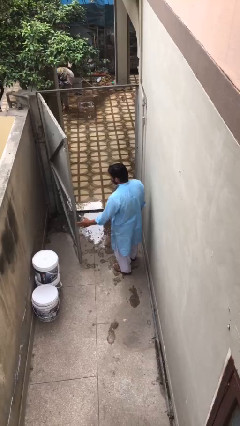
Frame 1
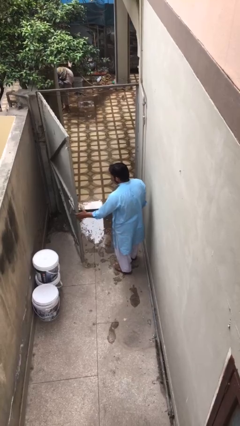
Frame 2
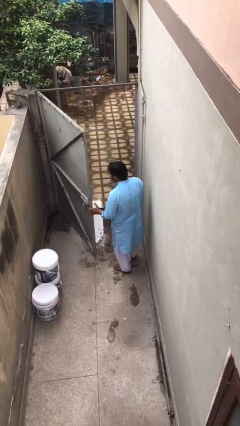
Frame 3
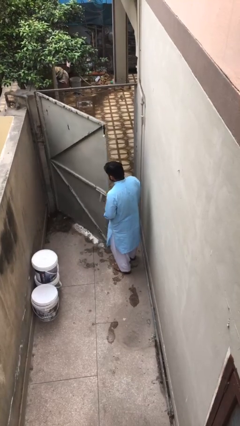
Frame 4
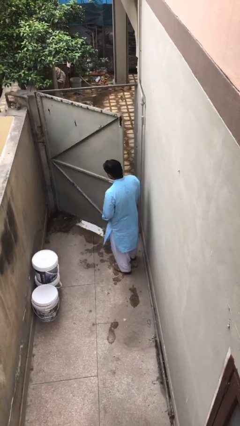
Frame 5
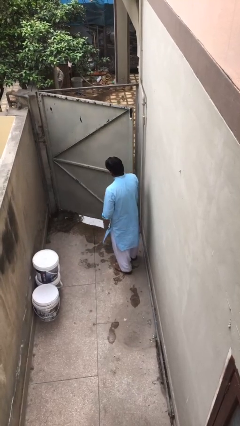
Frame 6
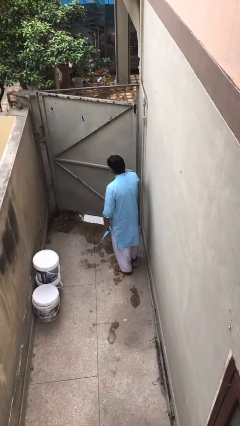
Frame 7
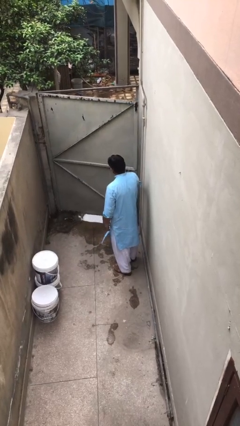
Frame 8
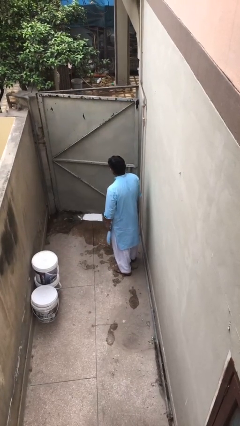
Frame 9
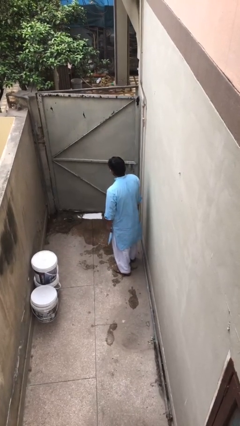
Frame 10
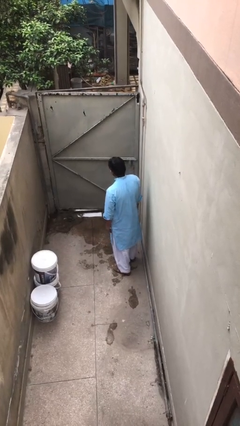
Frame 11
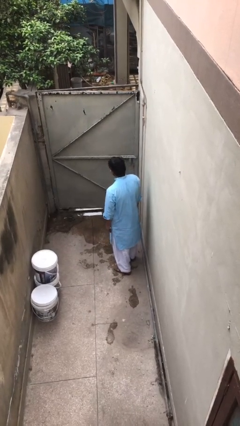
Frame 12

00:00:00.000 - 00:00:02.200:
person closes facility door

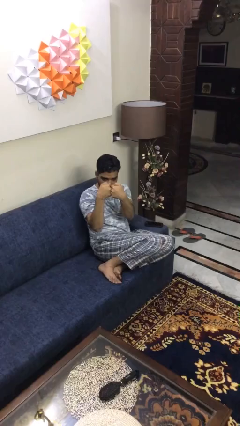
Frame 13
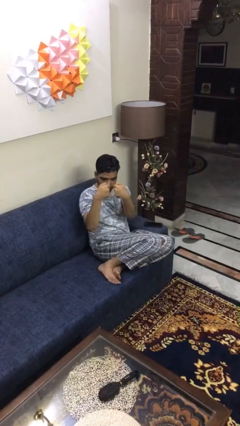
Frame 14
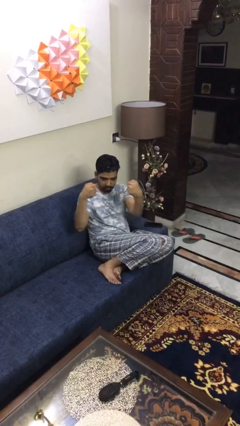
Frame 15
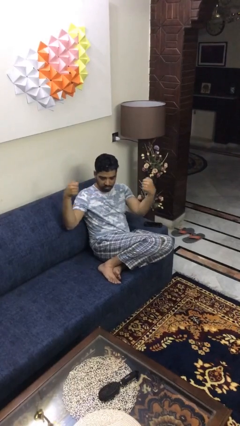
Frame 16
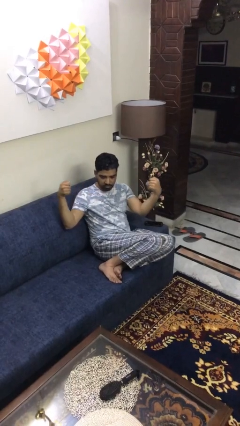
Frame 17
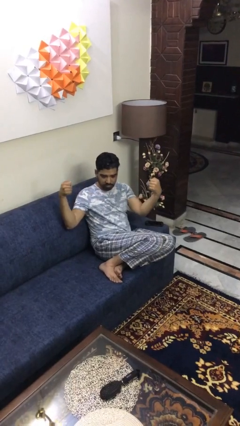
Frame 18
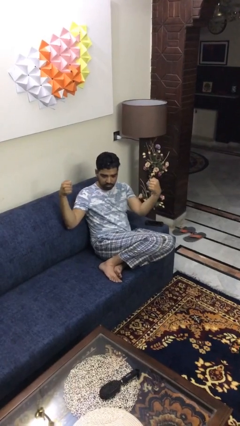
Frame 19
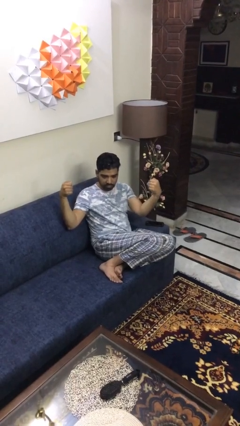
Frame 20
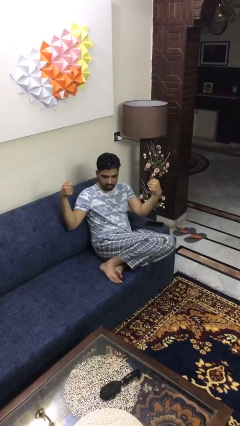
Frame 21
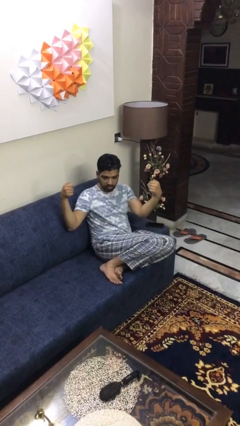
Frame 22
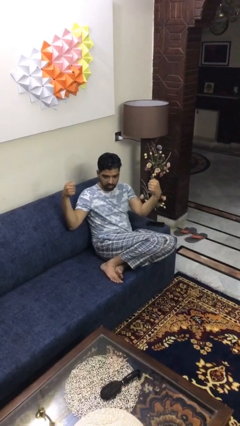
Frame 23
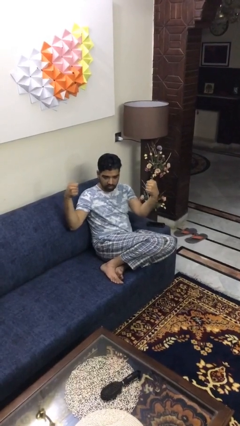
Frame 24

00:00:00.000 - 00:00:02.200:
person gestures zoom in

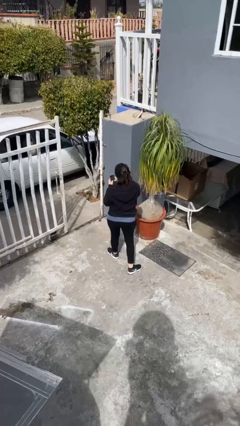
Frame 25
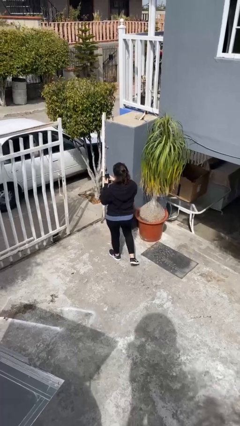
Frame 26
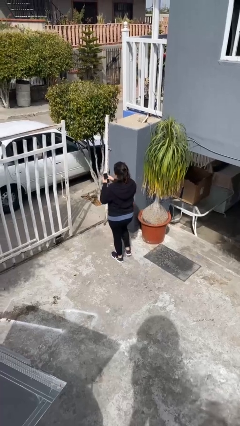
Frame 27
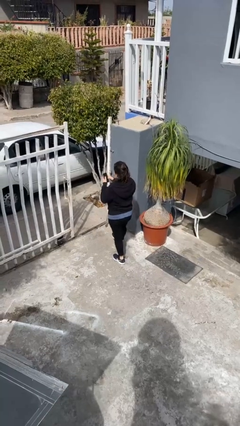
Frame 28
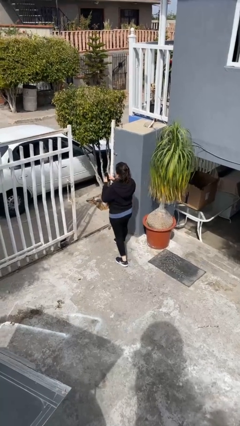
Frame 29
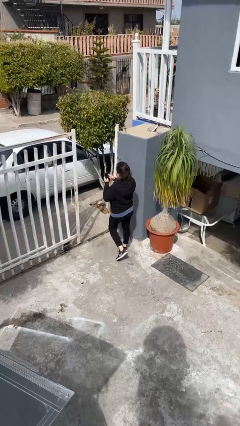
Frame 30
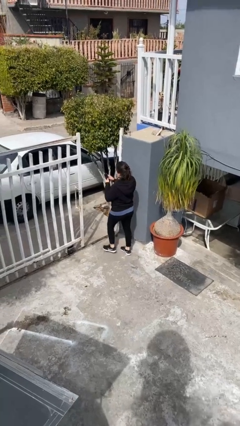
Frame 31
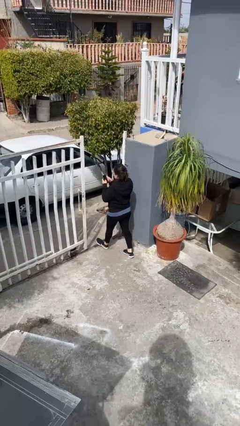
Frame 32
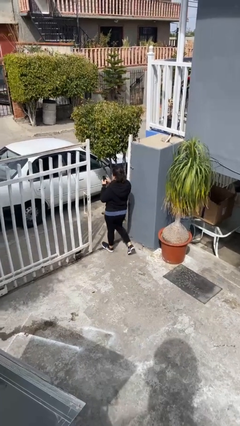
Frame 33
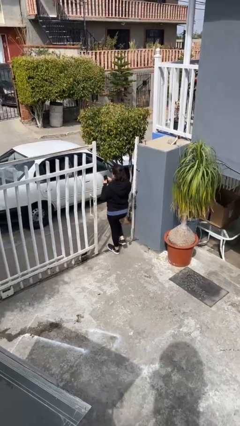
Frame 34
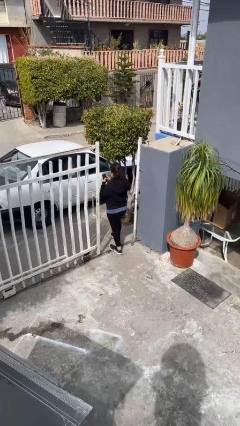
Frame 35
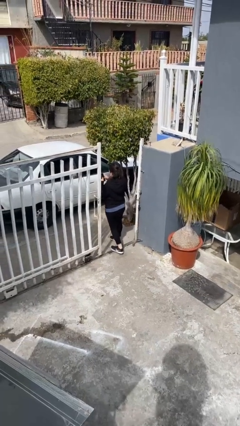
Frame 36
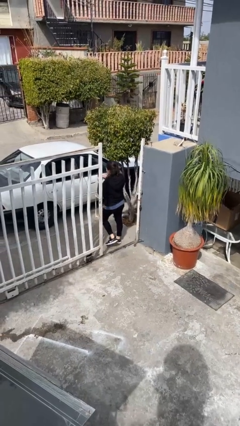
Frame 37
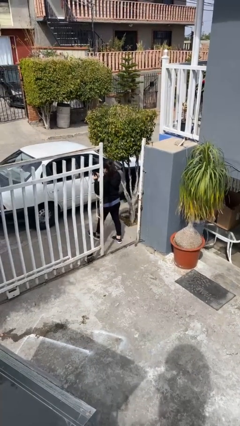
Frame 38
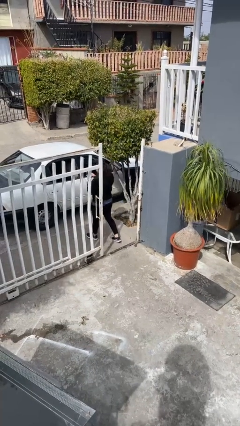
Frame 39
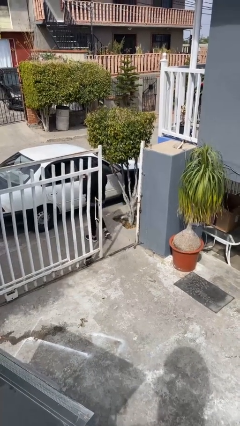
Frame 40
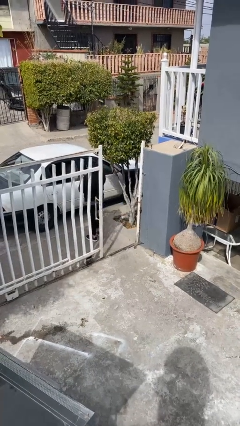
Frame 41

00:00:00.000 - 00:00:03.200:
person exits scene through structure

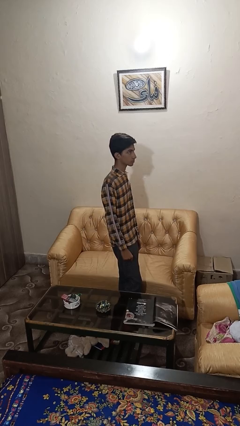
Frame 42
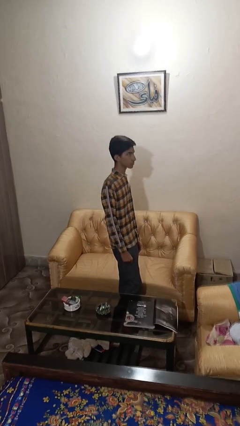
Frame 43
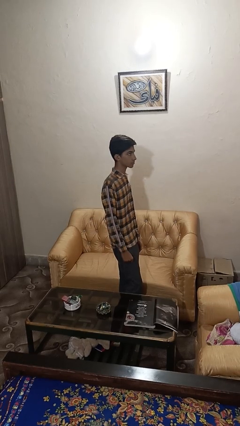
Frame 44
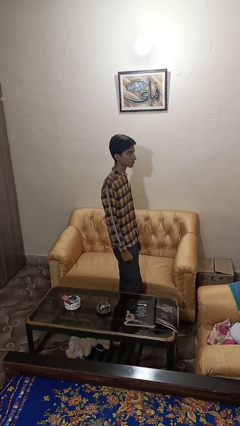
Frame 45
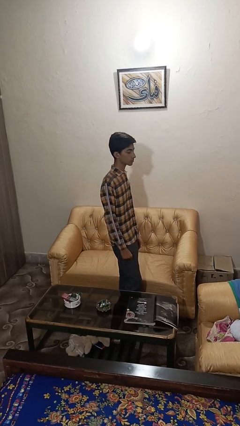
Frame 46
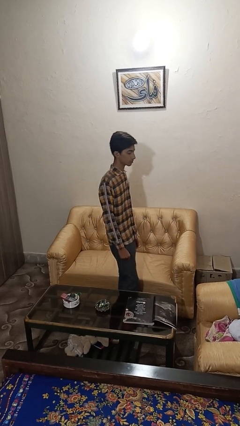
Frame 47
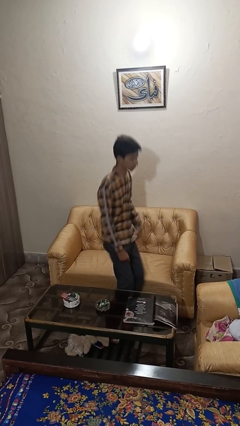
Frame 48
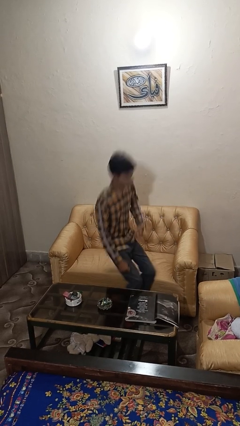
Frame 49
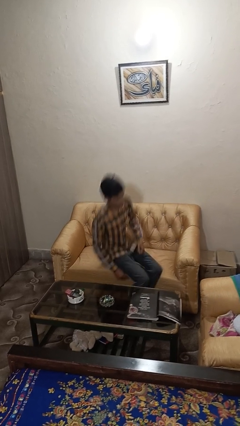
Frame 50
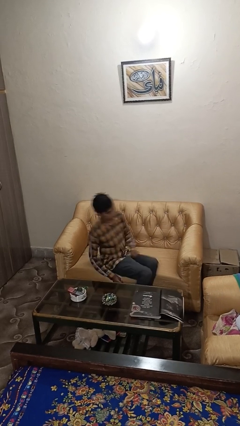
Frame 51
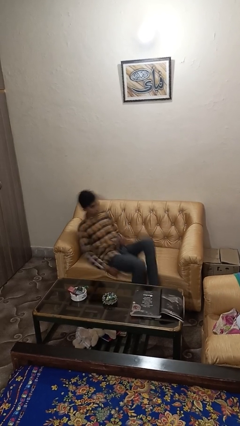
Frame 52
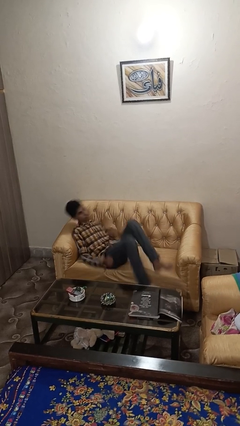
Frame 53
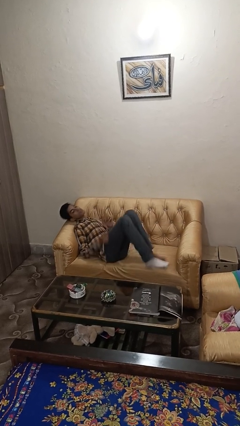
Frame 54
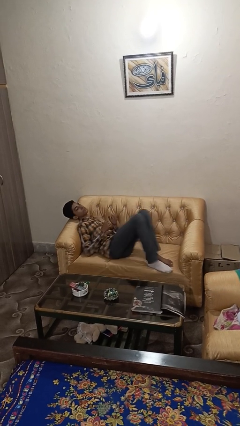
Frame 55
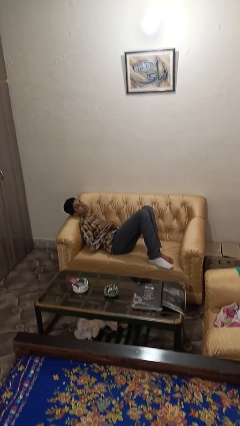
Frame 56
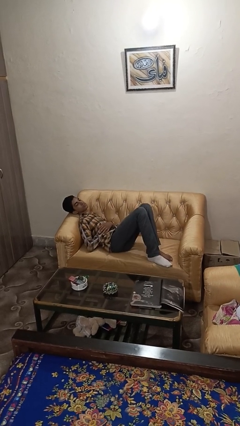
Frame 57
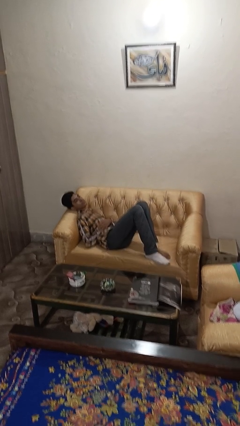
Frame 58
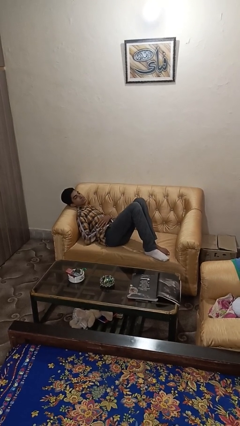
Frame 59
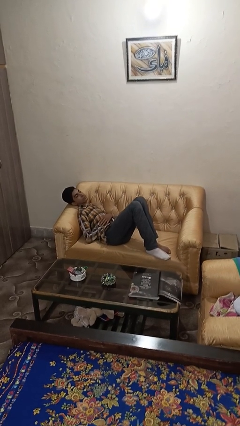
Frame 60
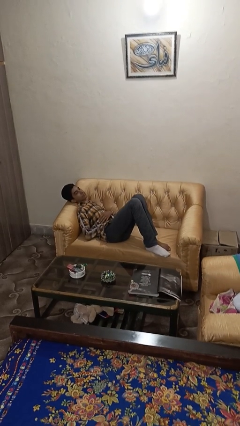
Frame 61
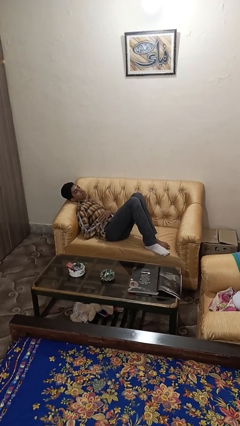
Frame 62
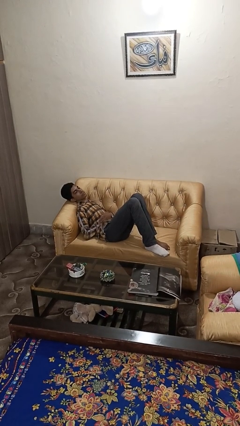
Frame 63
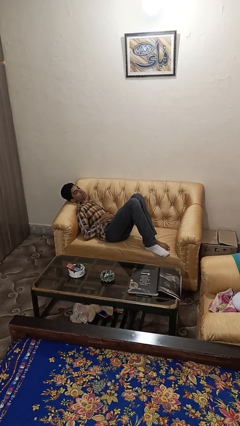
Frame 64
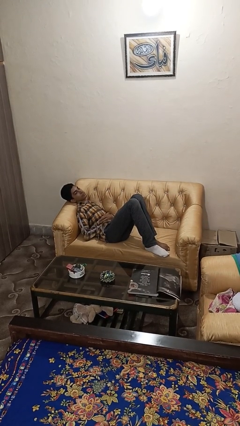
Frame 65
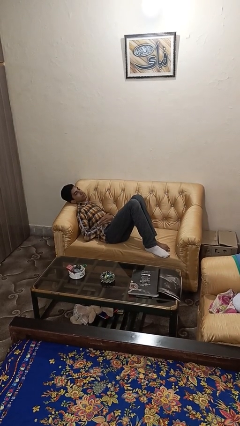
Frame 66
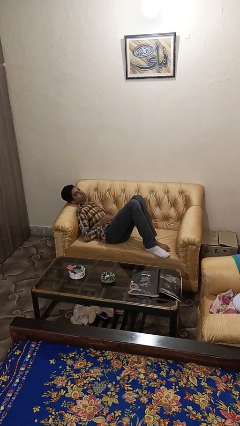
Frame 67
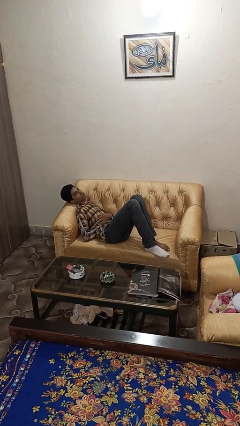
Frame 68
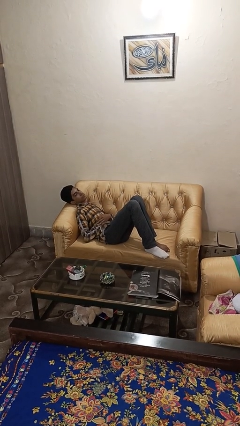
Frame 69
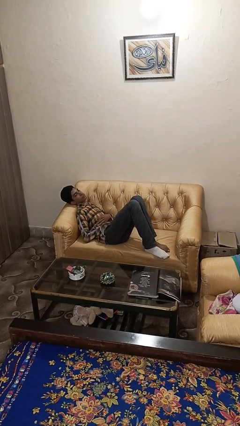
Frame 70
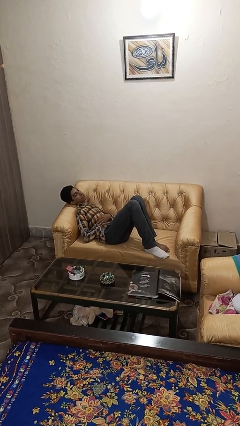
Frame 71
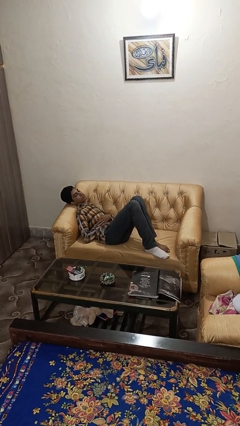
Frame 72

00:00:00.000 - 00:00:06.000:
person lies down on couch

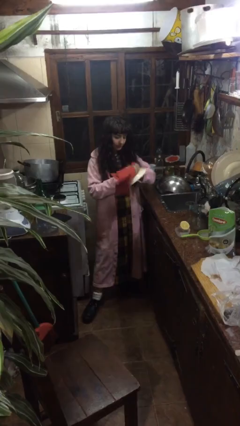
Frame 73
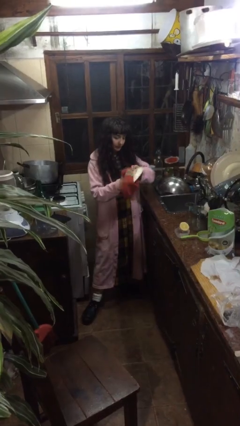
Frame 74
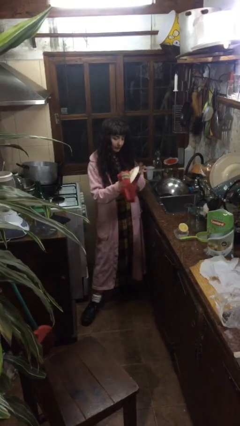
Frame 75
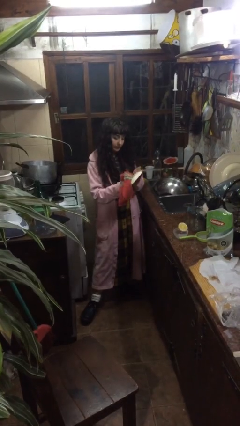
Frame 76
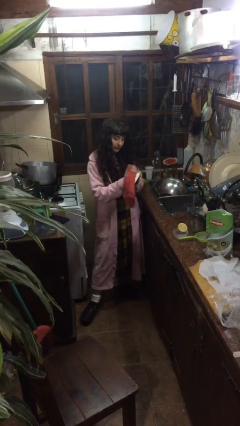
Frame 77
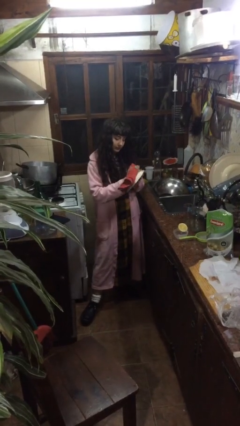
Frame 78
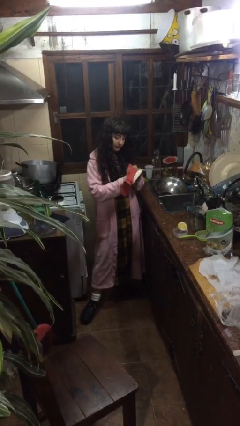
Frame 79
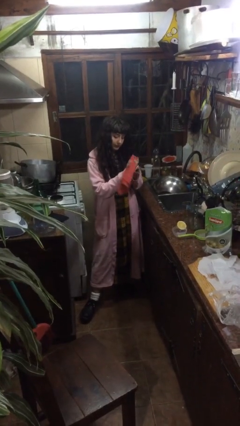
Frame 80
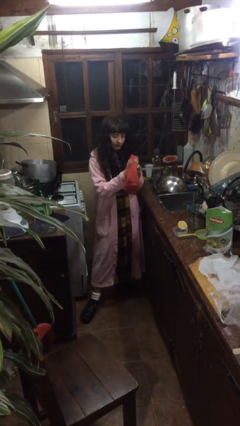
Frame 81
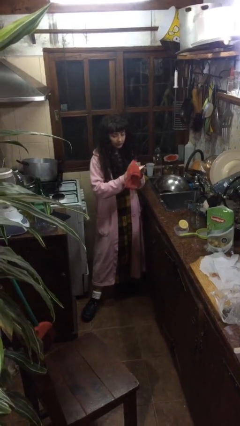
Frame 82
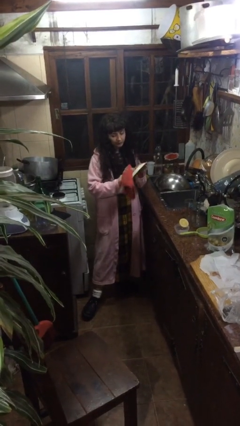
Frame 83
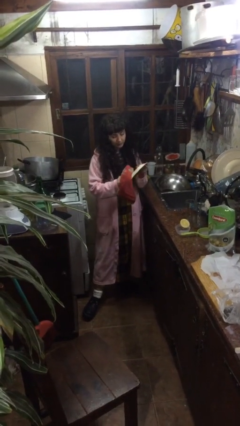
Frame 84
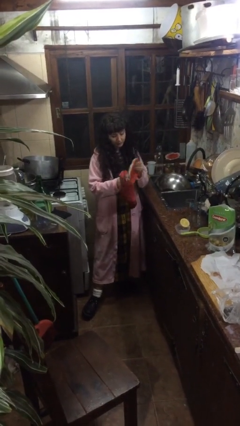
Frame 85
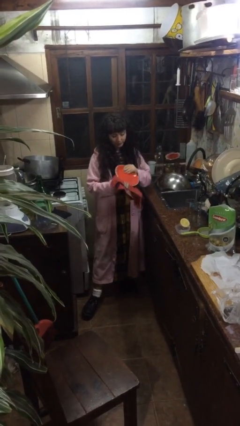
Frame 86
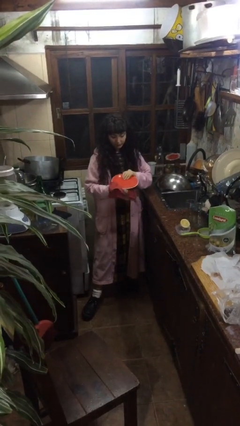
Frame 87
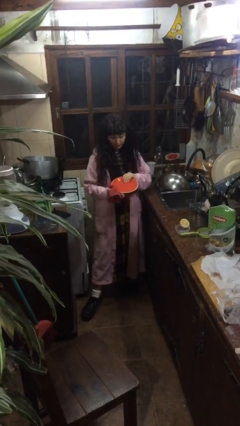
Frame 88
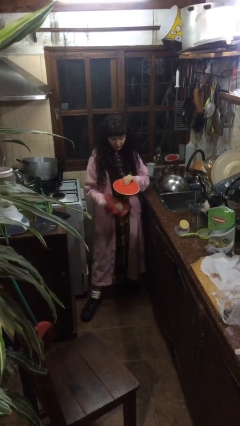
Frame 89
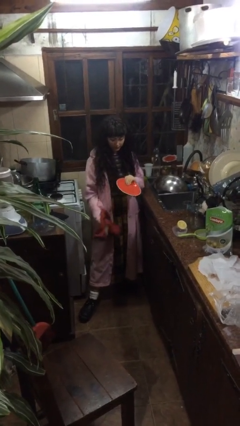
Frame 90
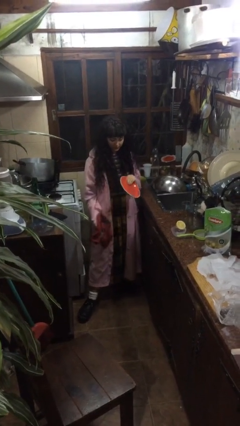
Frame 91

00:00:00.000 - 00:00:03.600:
person dries dish
